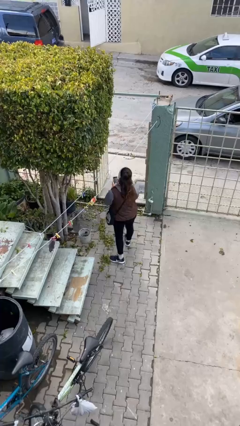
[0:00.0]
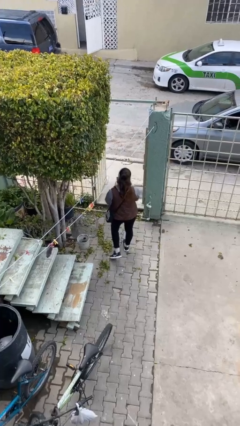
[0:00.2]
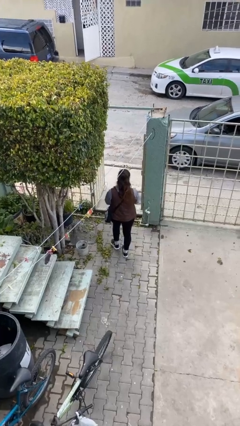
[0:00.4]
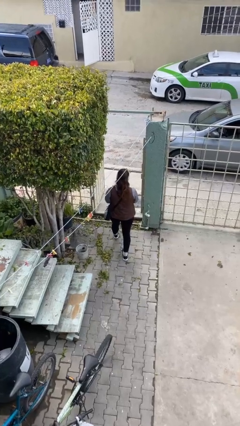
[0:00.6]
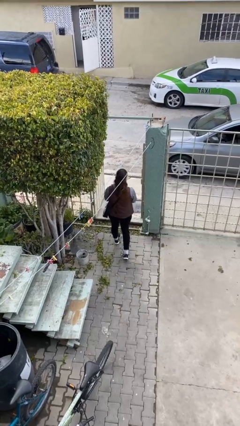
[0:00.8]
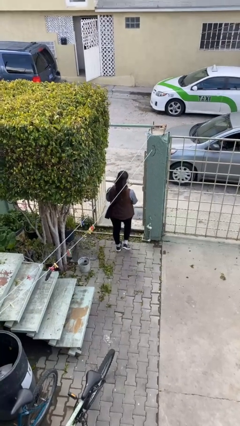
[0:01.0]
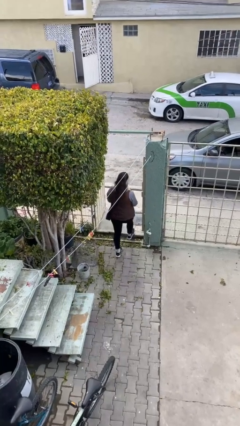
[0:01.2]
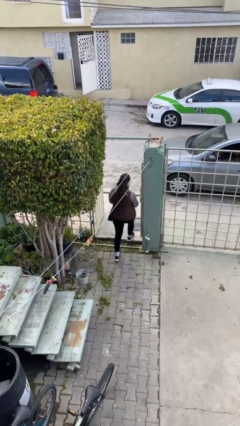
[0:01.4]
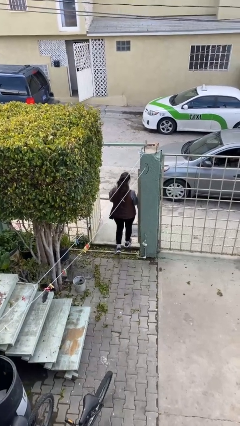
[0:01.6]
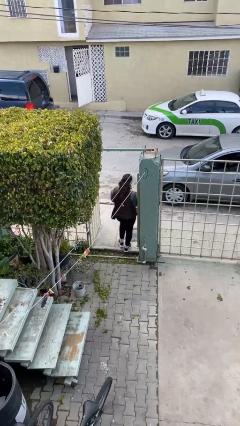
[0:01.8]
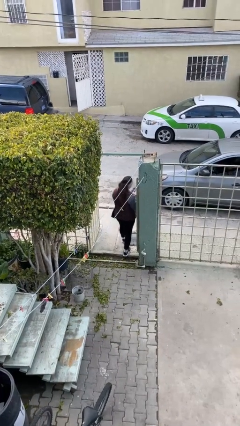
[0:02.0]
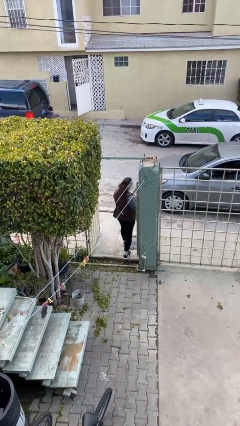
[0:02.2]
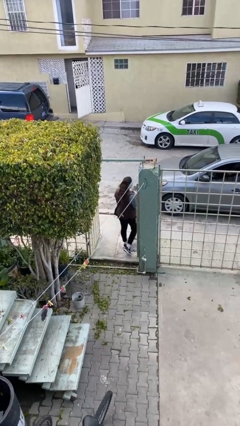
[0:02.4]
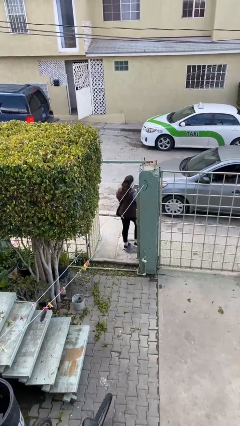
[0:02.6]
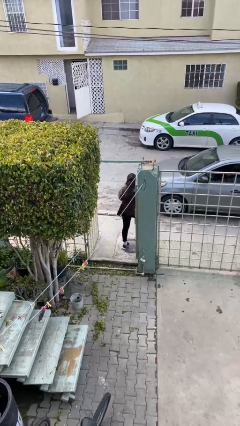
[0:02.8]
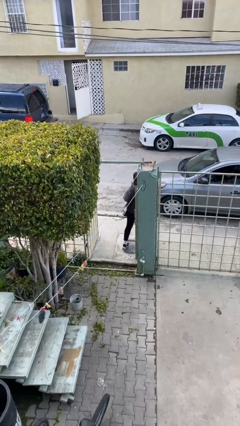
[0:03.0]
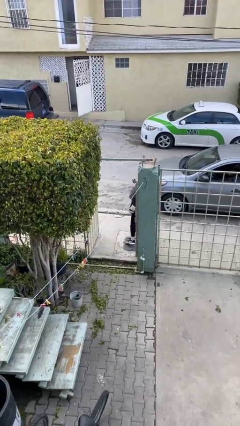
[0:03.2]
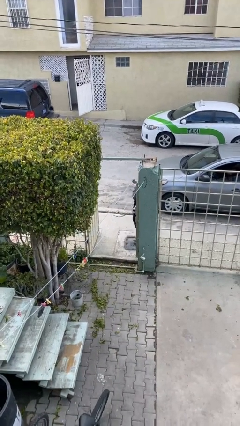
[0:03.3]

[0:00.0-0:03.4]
person exits scene through structure

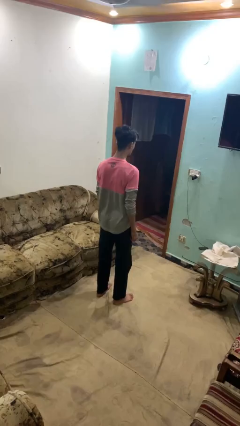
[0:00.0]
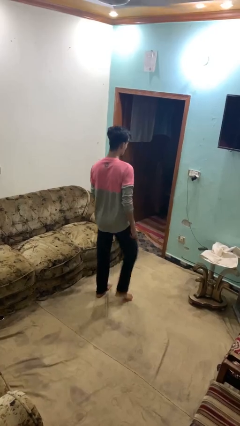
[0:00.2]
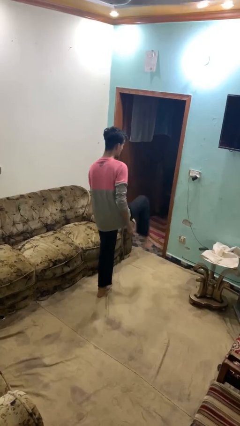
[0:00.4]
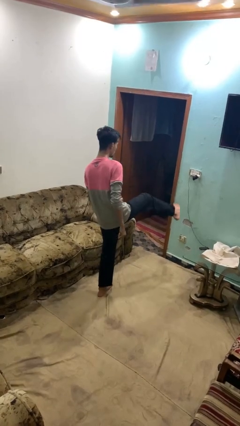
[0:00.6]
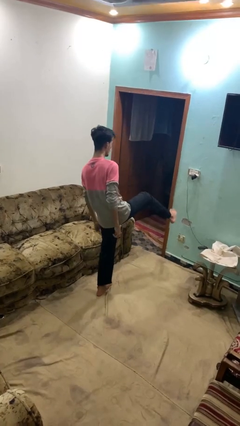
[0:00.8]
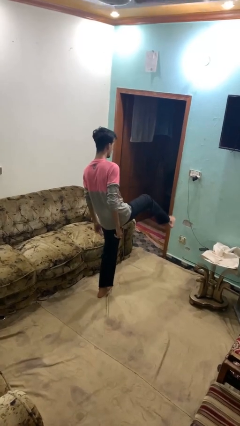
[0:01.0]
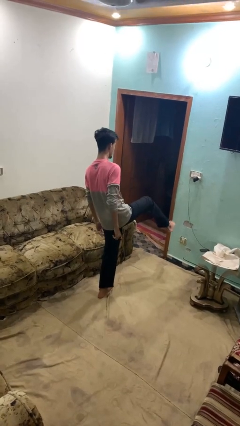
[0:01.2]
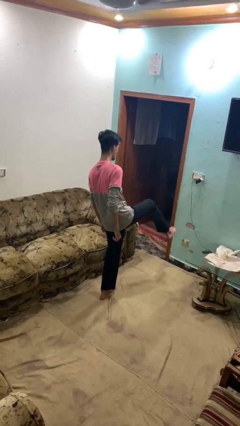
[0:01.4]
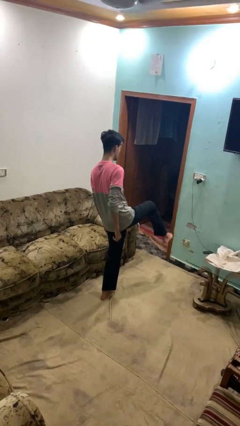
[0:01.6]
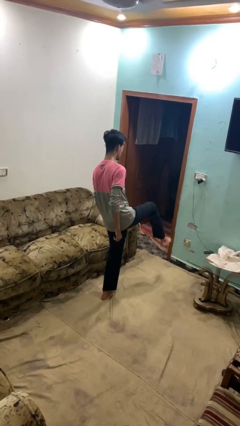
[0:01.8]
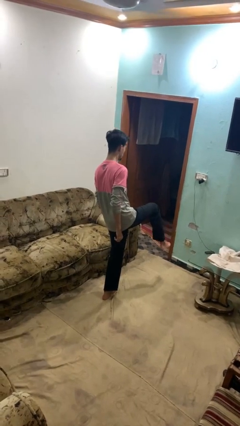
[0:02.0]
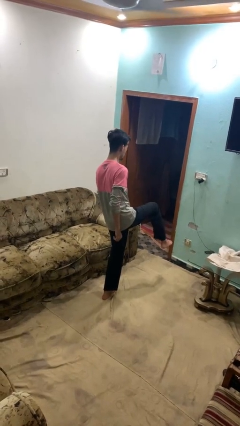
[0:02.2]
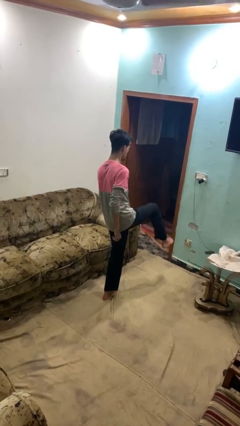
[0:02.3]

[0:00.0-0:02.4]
person karate kicks

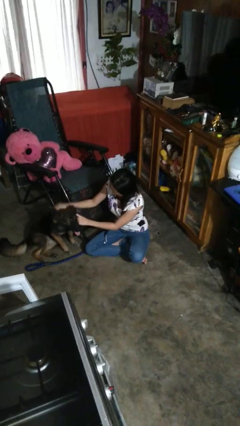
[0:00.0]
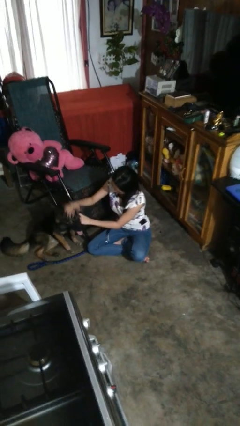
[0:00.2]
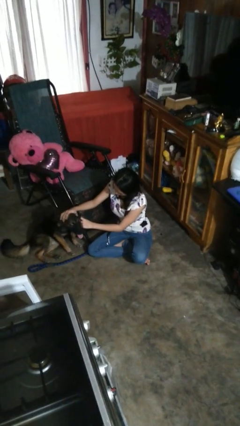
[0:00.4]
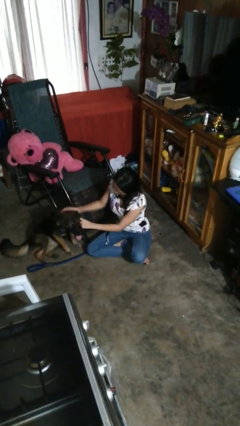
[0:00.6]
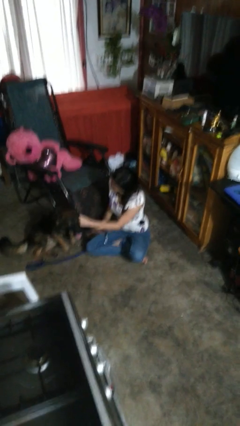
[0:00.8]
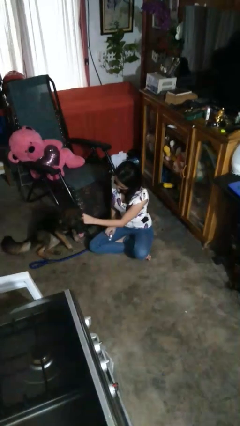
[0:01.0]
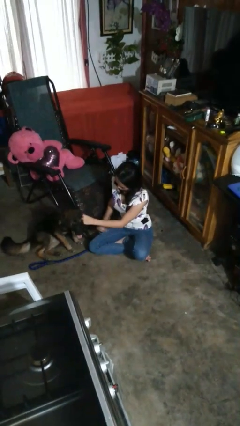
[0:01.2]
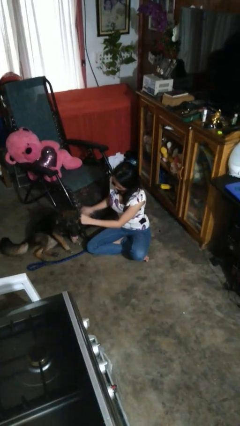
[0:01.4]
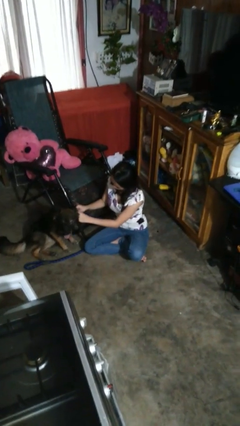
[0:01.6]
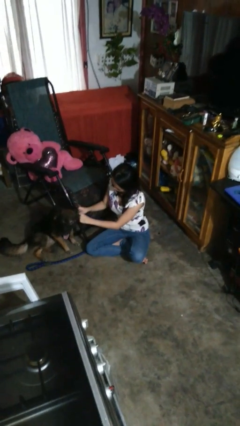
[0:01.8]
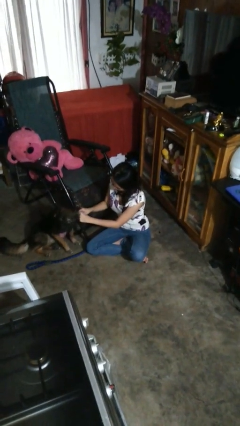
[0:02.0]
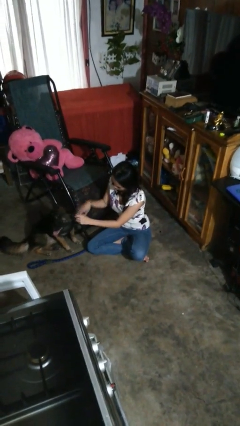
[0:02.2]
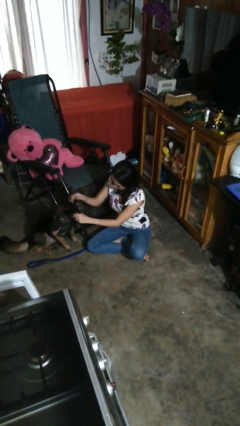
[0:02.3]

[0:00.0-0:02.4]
person attaches leash to dog

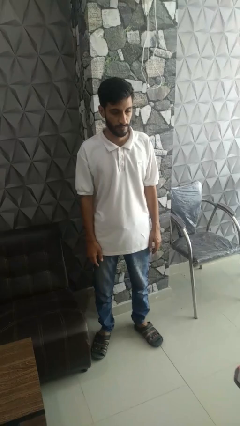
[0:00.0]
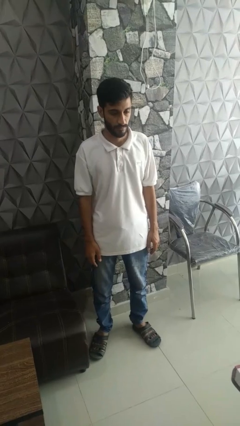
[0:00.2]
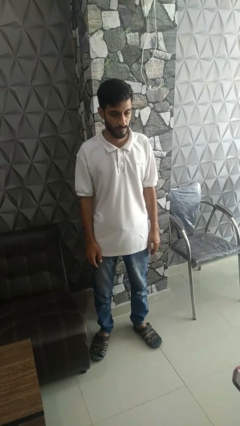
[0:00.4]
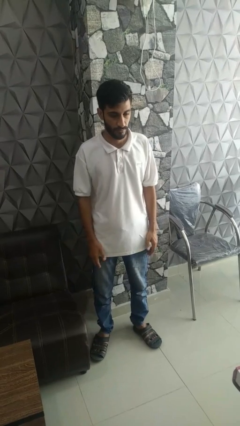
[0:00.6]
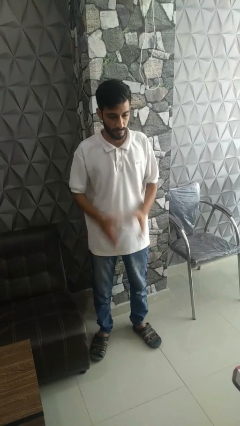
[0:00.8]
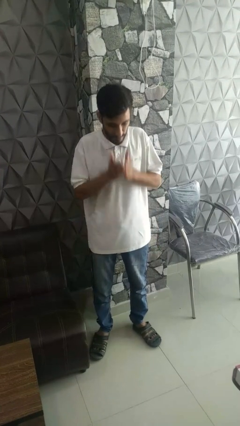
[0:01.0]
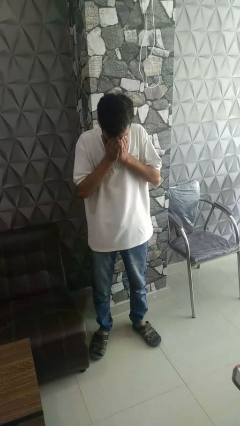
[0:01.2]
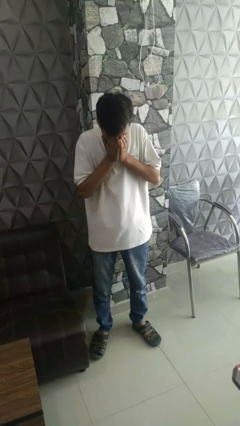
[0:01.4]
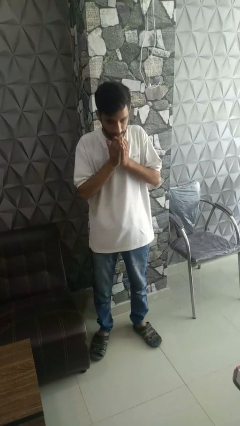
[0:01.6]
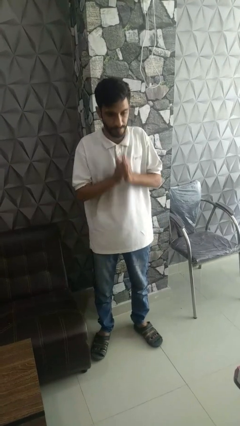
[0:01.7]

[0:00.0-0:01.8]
person sneezes into hand

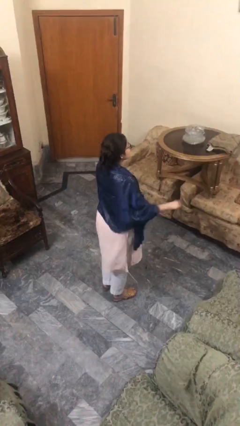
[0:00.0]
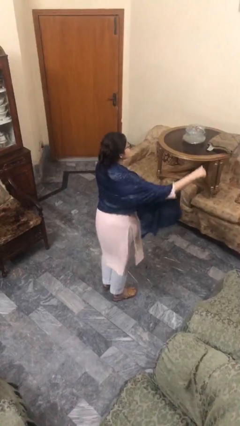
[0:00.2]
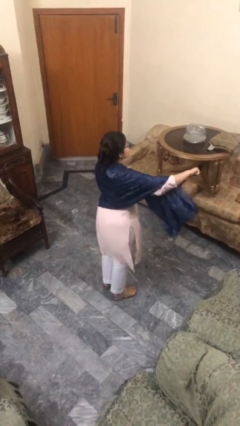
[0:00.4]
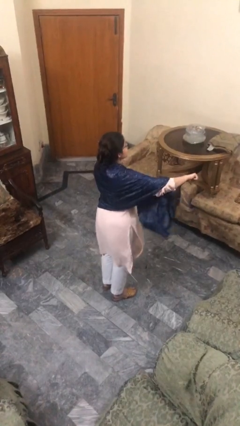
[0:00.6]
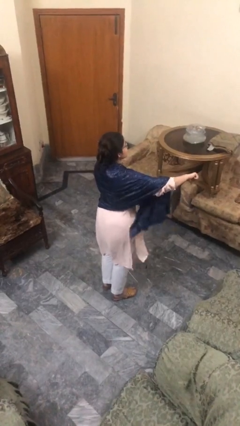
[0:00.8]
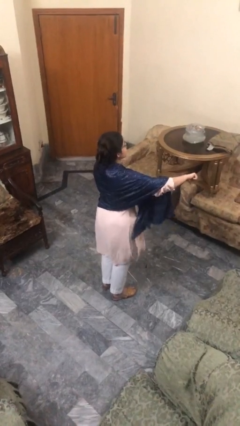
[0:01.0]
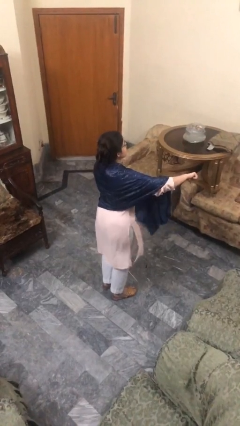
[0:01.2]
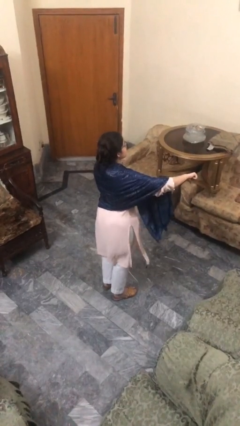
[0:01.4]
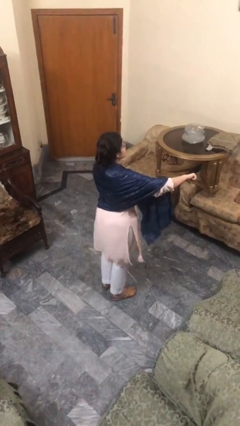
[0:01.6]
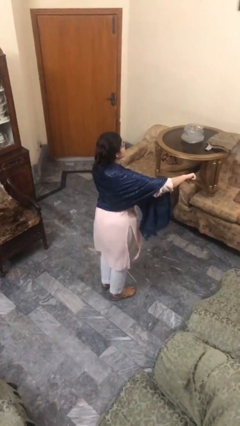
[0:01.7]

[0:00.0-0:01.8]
person gestures thumbs down

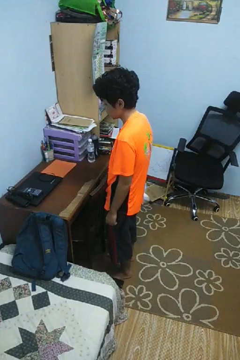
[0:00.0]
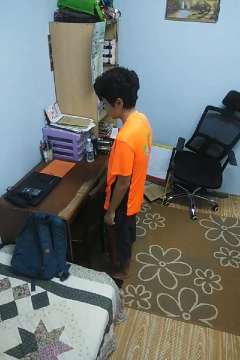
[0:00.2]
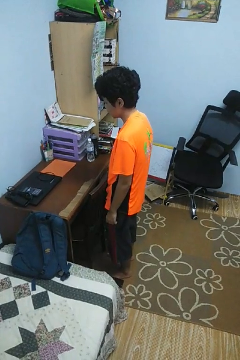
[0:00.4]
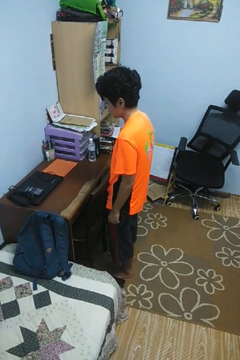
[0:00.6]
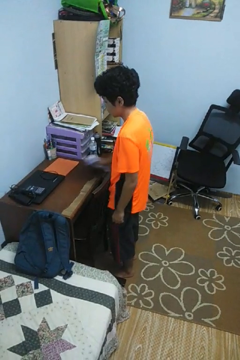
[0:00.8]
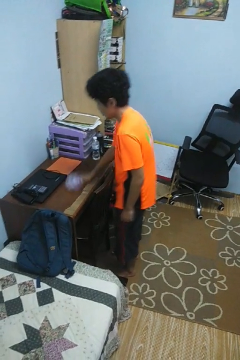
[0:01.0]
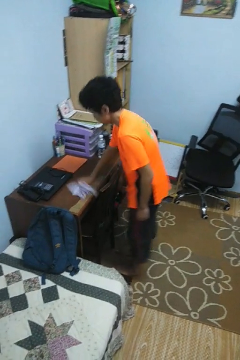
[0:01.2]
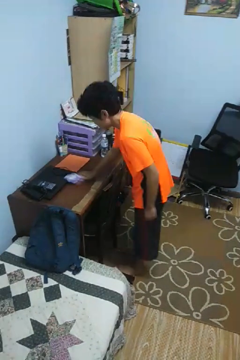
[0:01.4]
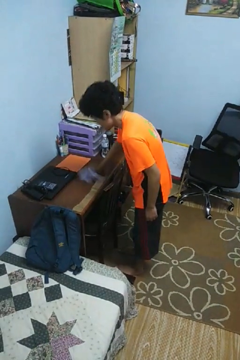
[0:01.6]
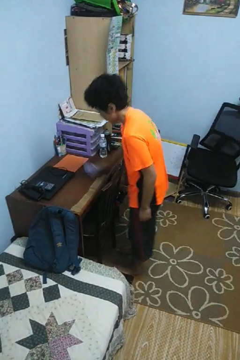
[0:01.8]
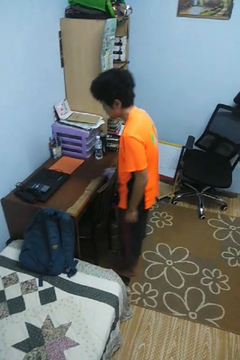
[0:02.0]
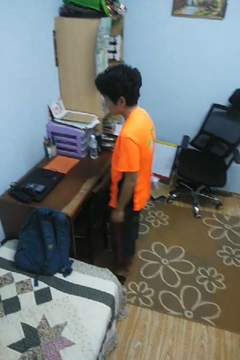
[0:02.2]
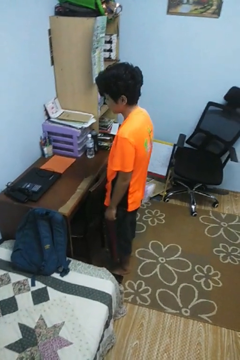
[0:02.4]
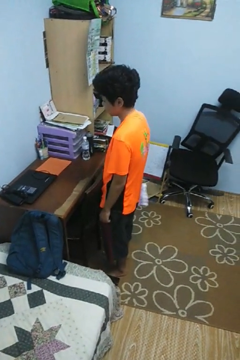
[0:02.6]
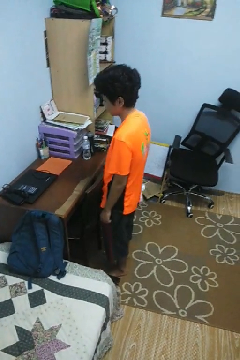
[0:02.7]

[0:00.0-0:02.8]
person cleans table with rag

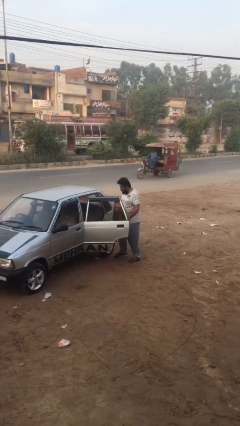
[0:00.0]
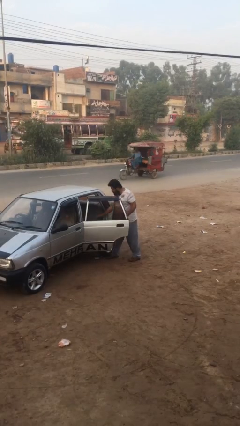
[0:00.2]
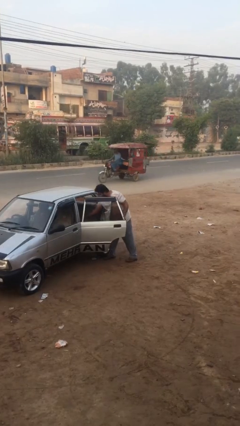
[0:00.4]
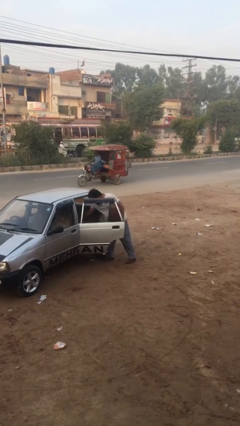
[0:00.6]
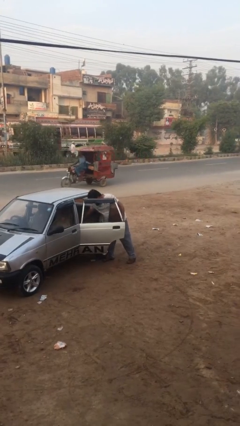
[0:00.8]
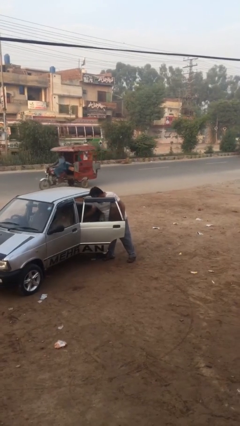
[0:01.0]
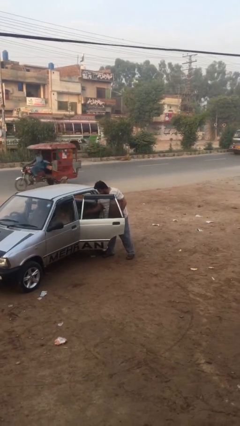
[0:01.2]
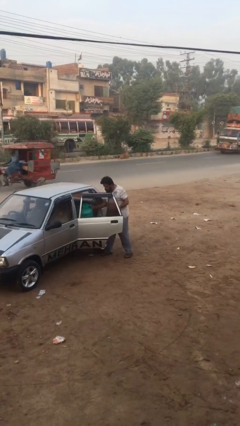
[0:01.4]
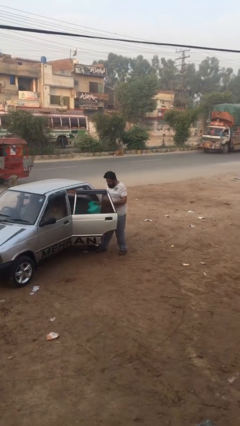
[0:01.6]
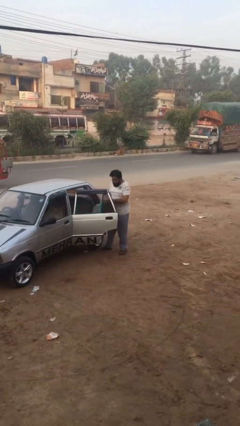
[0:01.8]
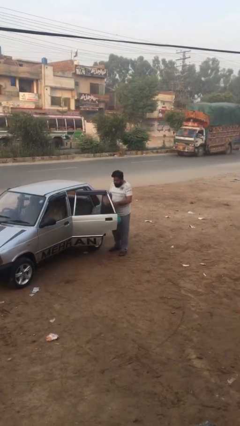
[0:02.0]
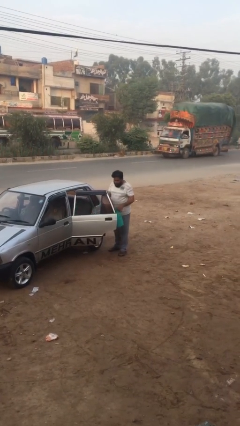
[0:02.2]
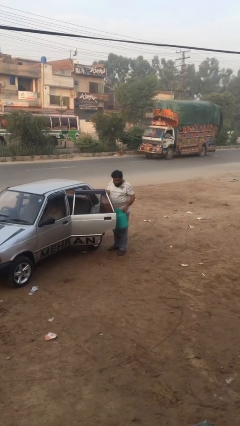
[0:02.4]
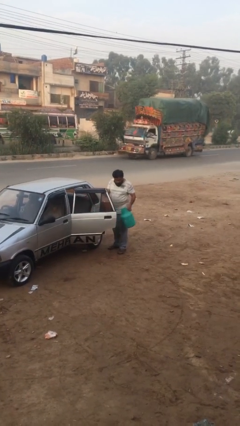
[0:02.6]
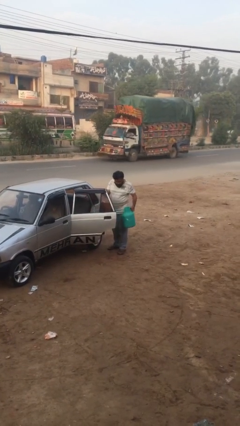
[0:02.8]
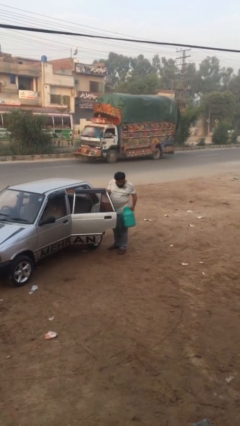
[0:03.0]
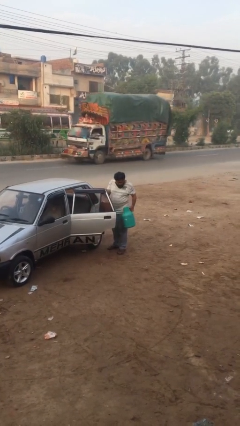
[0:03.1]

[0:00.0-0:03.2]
person unloads car

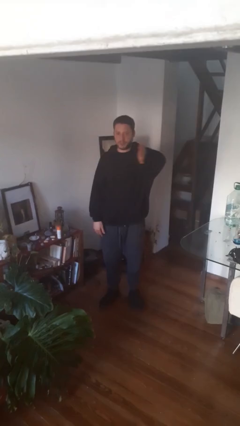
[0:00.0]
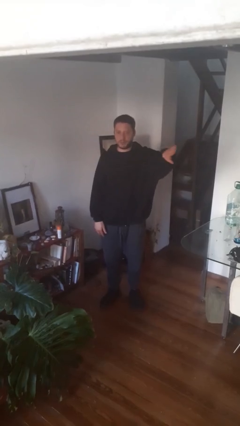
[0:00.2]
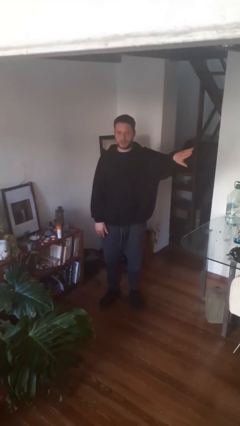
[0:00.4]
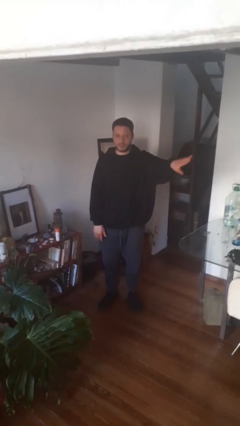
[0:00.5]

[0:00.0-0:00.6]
person gestures swipe left
